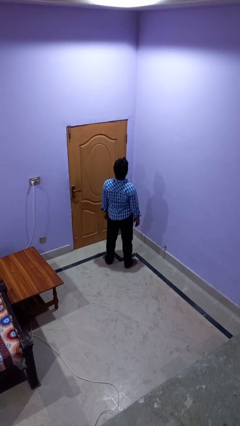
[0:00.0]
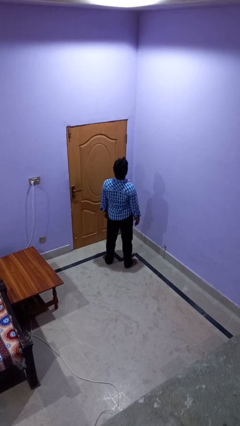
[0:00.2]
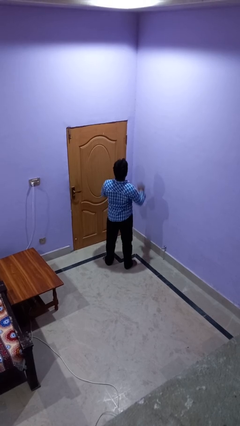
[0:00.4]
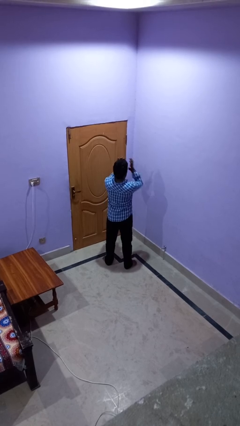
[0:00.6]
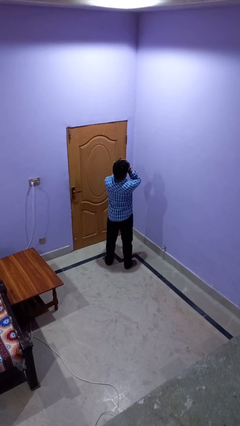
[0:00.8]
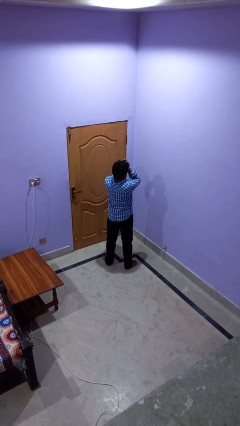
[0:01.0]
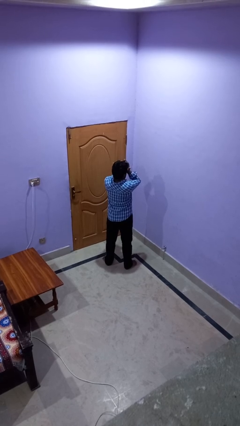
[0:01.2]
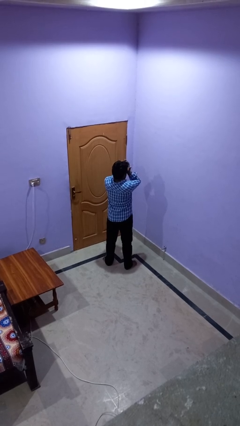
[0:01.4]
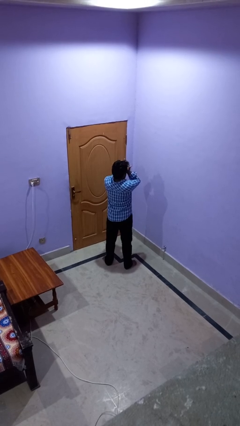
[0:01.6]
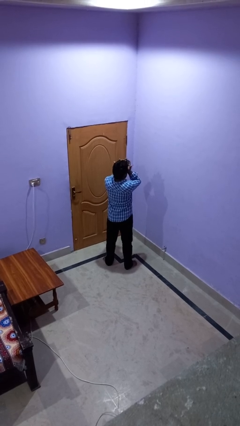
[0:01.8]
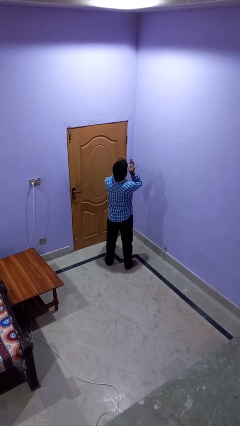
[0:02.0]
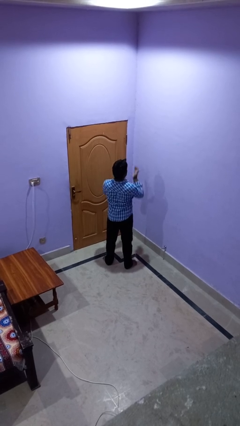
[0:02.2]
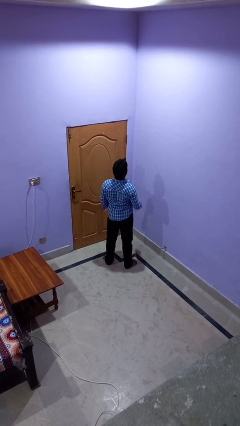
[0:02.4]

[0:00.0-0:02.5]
person rubs eyes

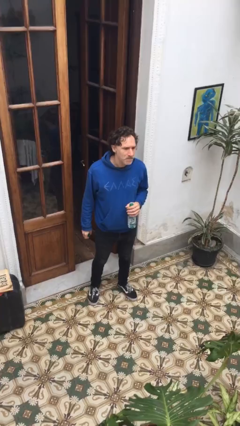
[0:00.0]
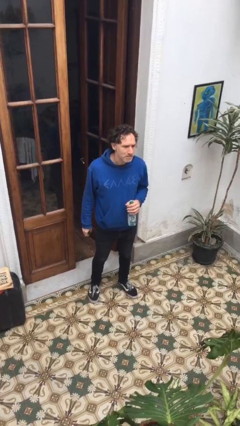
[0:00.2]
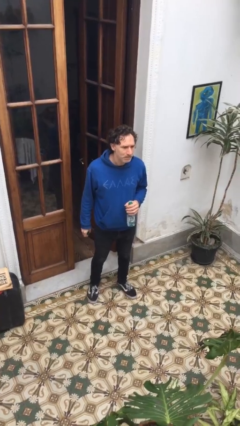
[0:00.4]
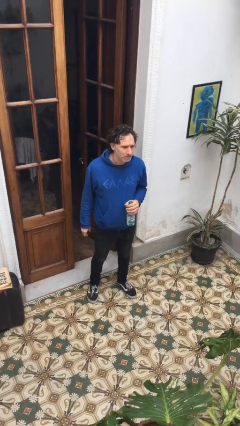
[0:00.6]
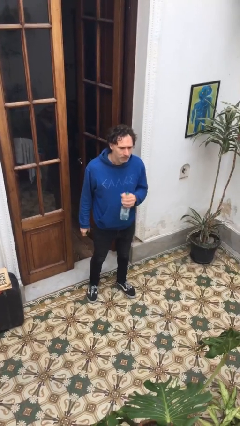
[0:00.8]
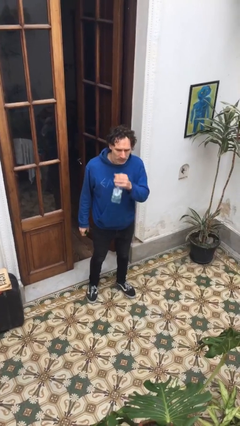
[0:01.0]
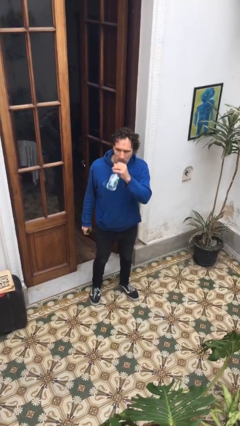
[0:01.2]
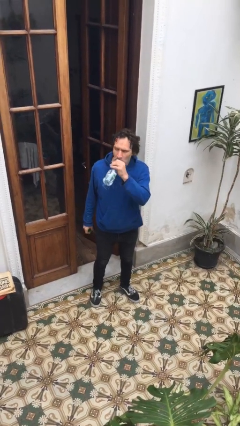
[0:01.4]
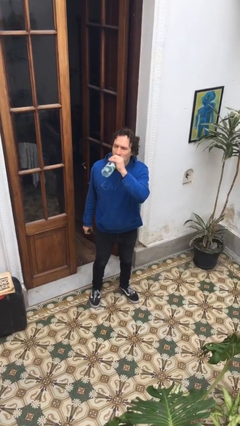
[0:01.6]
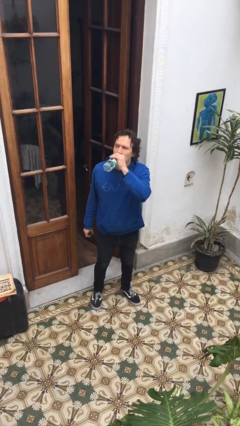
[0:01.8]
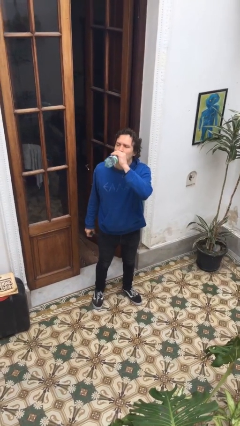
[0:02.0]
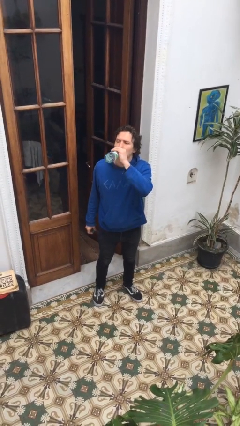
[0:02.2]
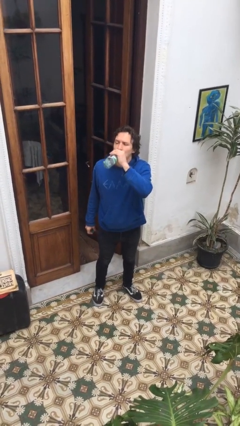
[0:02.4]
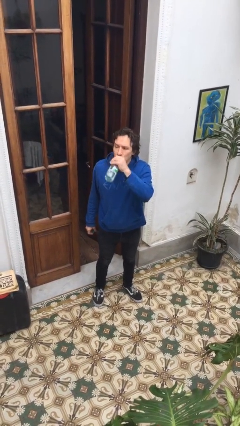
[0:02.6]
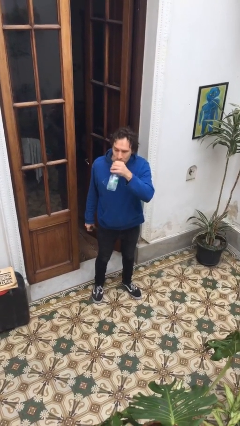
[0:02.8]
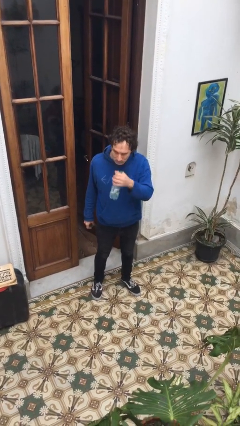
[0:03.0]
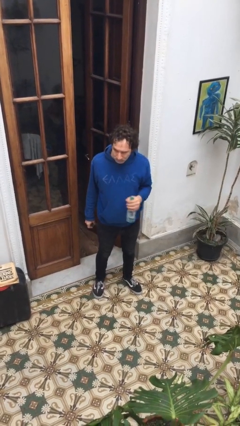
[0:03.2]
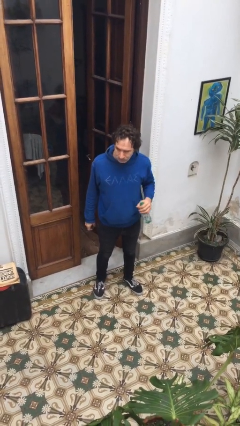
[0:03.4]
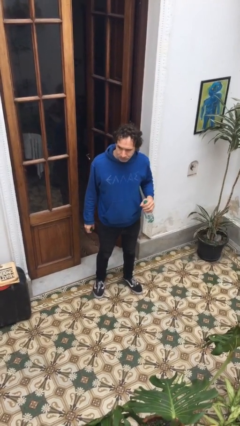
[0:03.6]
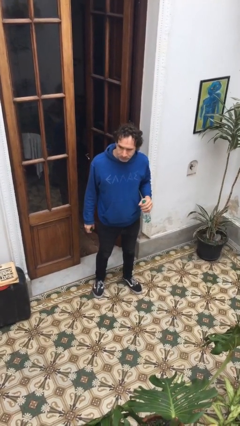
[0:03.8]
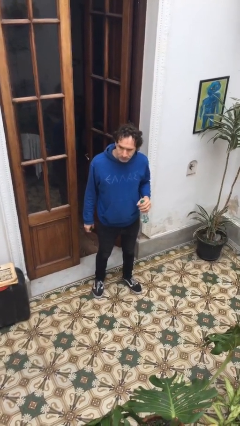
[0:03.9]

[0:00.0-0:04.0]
person drinks from bottle

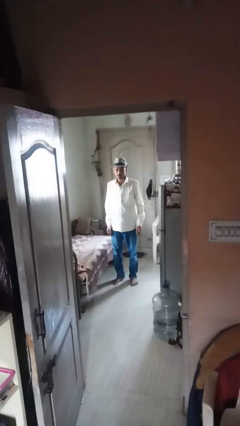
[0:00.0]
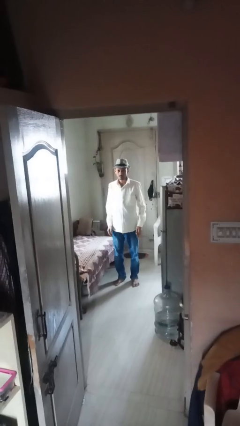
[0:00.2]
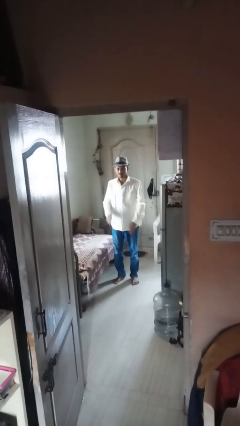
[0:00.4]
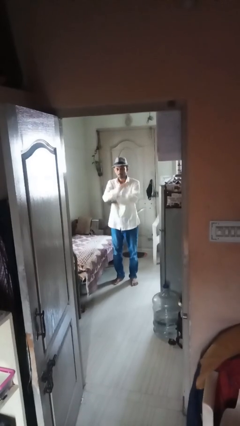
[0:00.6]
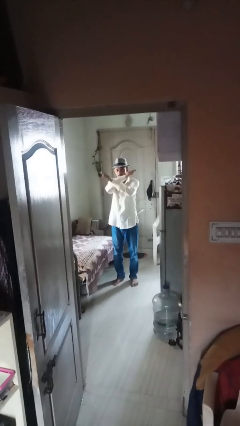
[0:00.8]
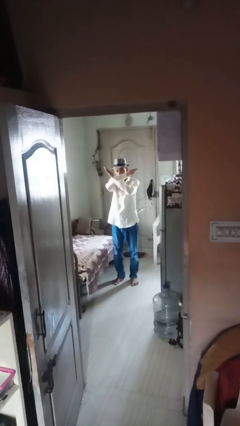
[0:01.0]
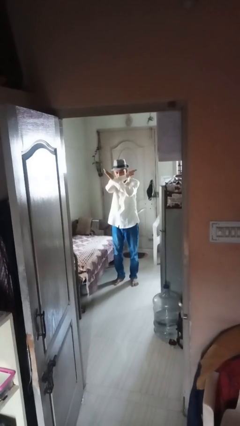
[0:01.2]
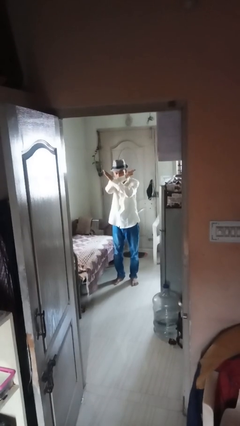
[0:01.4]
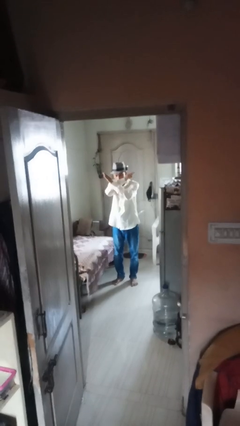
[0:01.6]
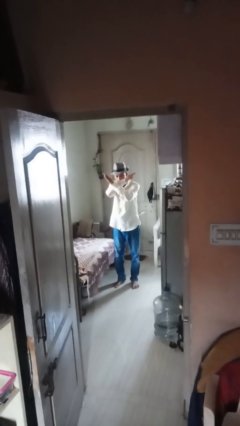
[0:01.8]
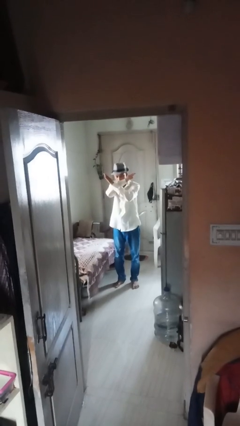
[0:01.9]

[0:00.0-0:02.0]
person gestures arms x

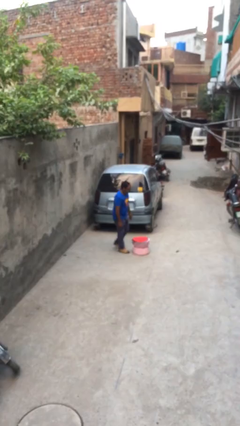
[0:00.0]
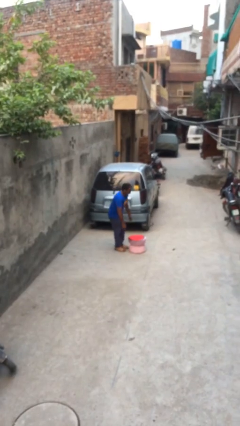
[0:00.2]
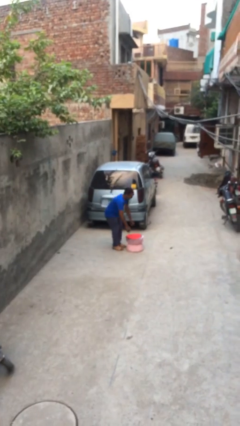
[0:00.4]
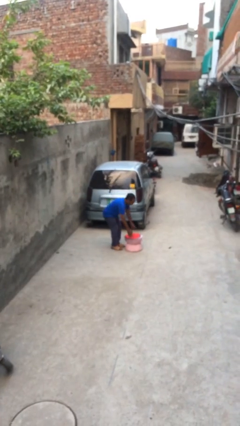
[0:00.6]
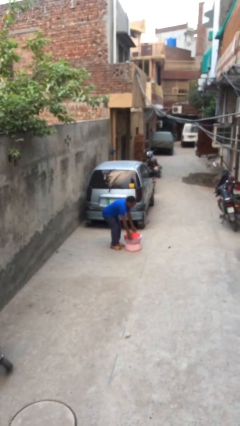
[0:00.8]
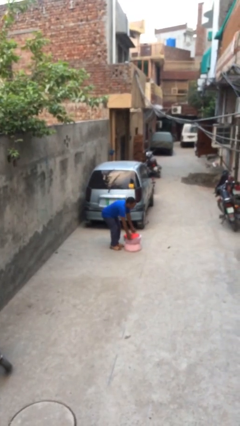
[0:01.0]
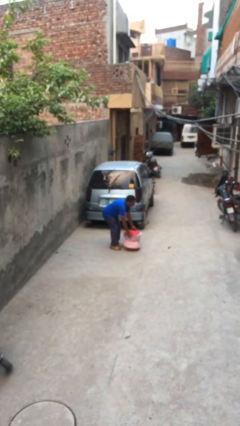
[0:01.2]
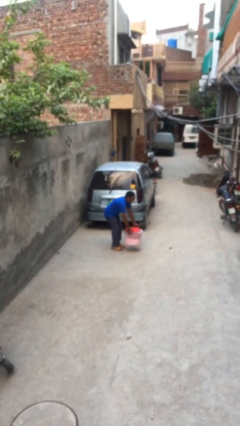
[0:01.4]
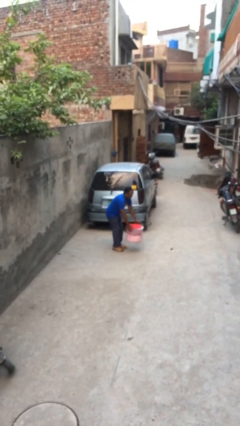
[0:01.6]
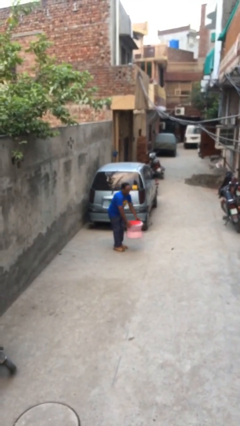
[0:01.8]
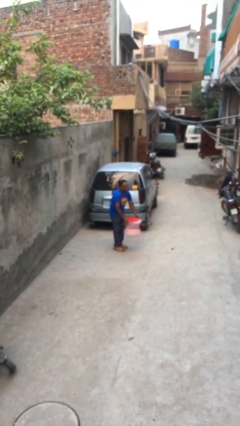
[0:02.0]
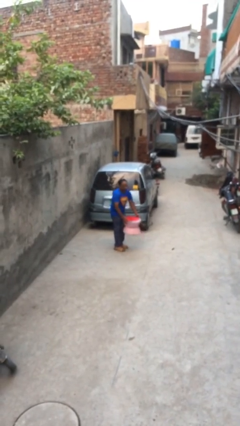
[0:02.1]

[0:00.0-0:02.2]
person picks up object from floor

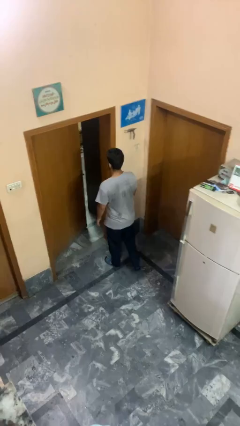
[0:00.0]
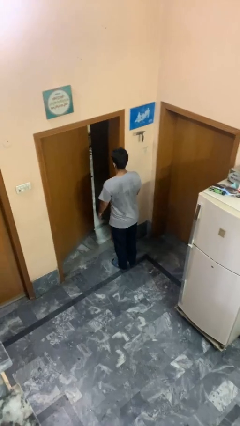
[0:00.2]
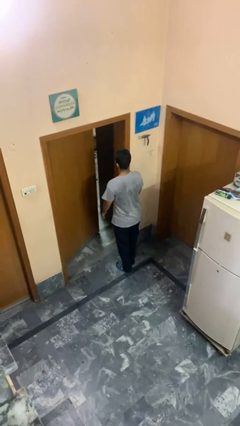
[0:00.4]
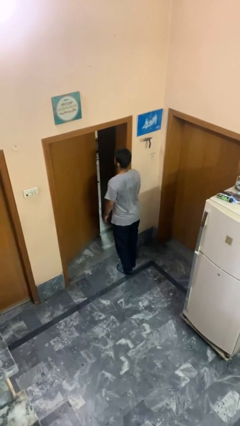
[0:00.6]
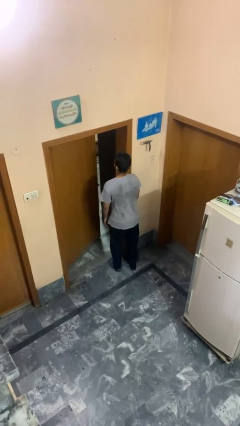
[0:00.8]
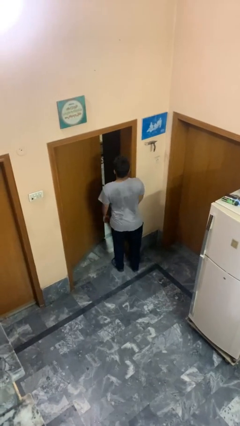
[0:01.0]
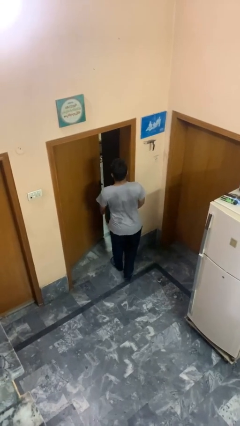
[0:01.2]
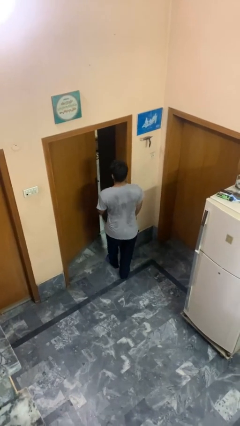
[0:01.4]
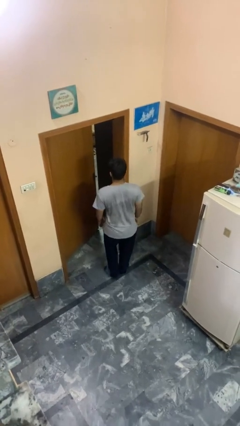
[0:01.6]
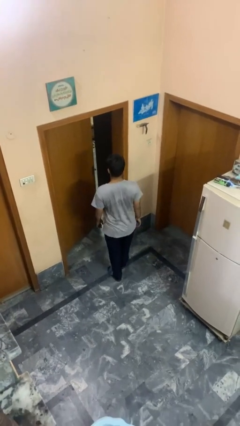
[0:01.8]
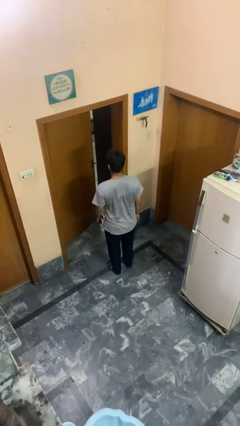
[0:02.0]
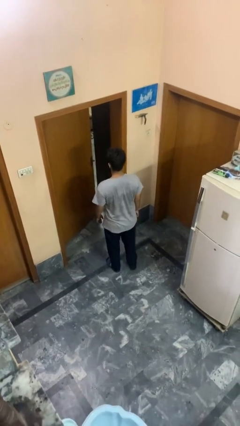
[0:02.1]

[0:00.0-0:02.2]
person bumps into wall

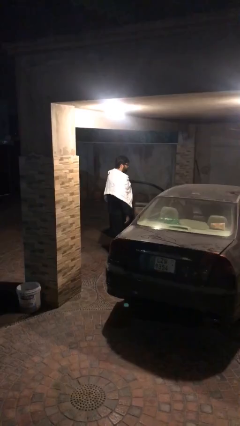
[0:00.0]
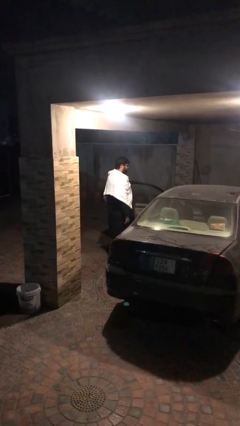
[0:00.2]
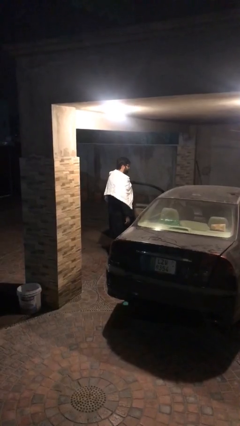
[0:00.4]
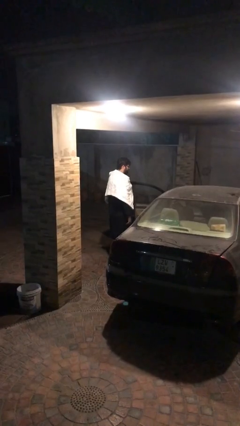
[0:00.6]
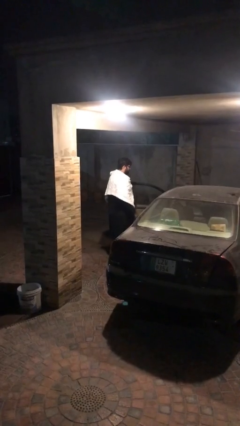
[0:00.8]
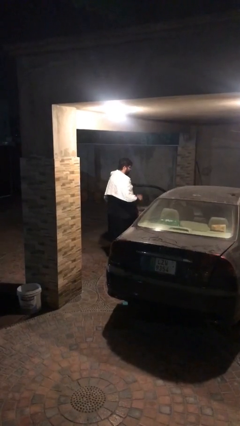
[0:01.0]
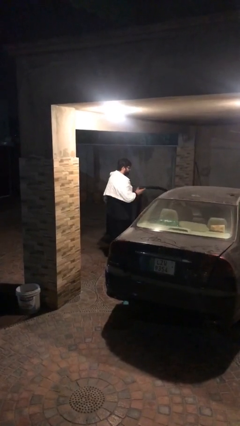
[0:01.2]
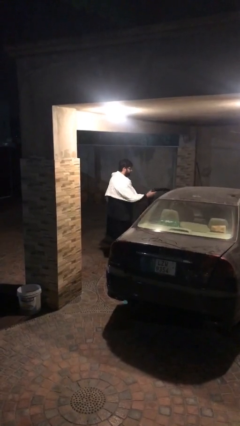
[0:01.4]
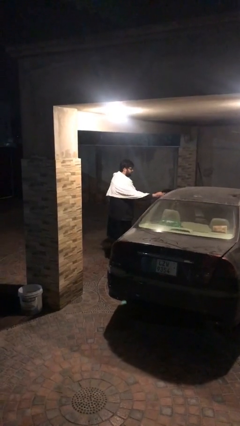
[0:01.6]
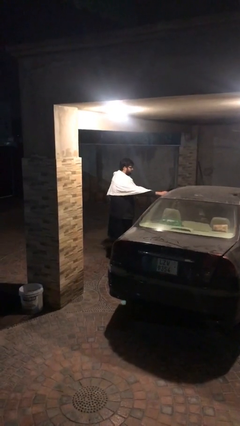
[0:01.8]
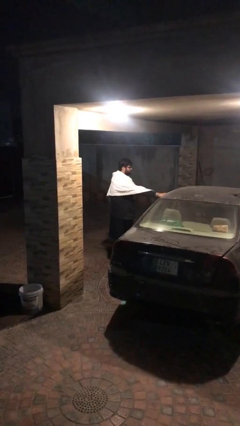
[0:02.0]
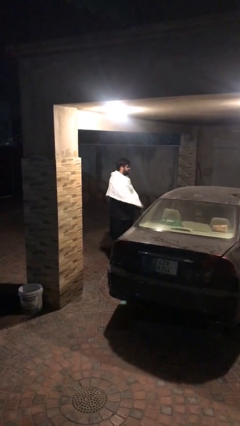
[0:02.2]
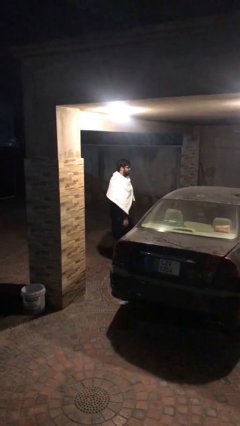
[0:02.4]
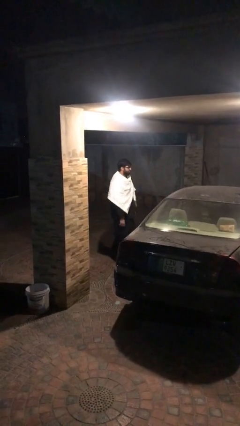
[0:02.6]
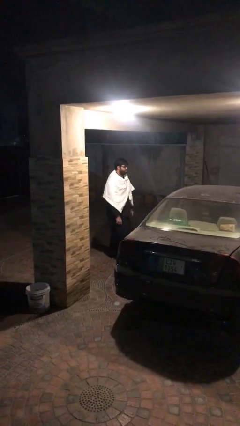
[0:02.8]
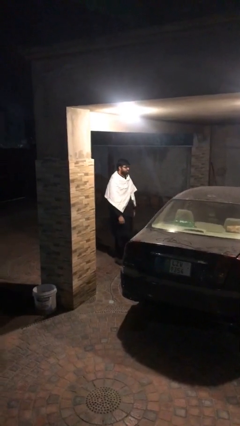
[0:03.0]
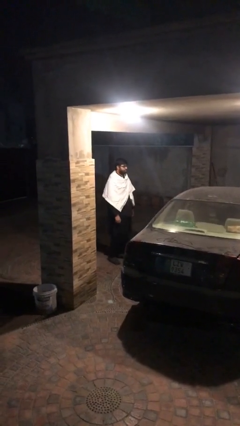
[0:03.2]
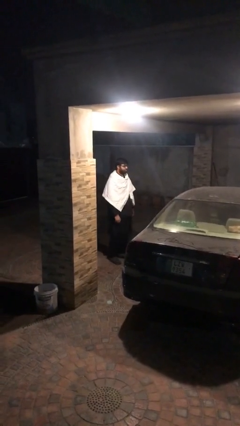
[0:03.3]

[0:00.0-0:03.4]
person closes car door

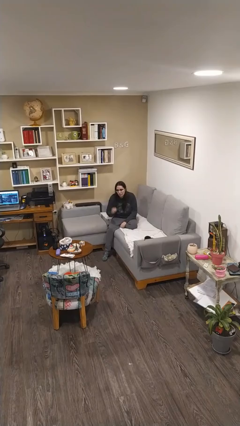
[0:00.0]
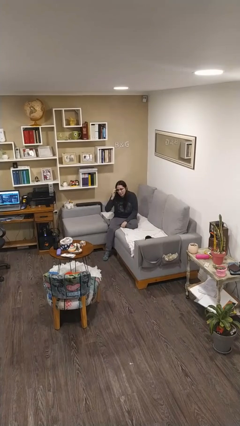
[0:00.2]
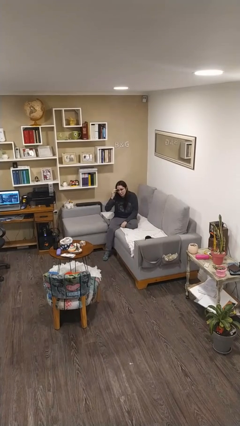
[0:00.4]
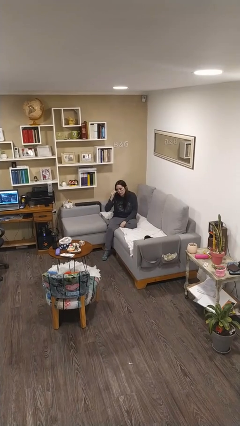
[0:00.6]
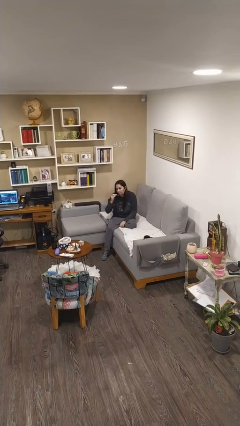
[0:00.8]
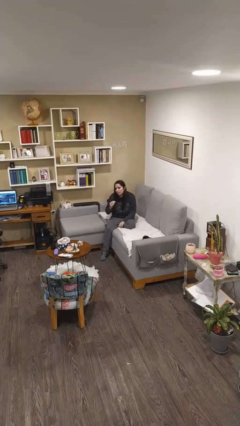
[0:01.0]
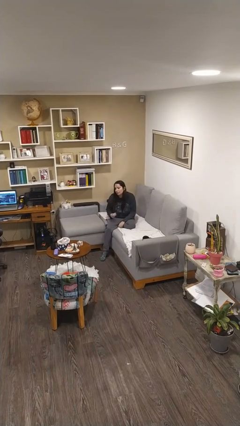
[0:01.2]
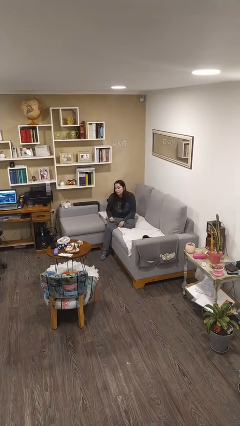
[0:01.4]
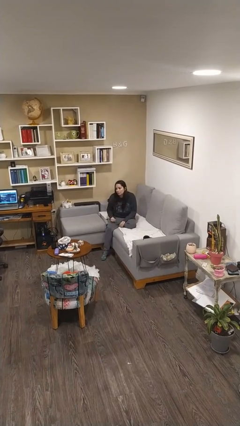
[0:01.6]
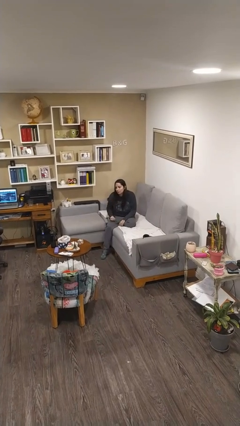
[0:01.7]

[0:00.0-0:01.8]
person takes off glasses
